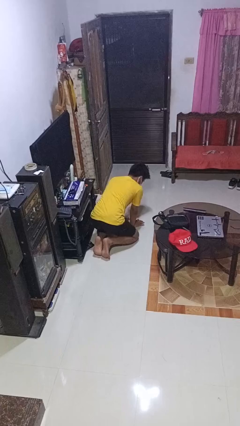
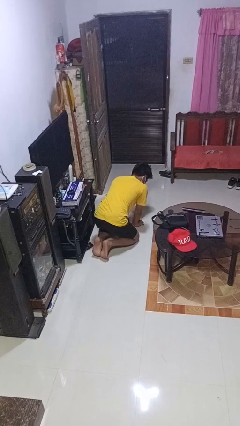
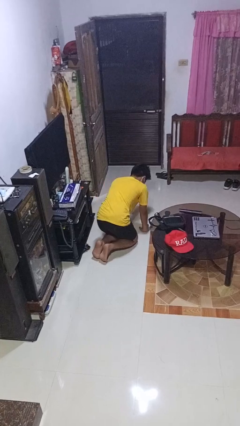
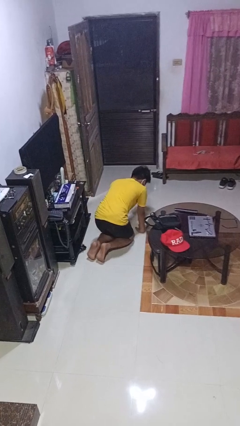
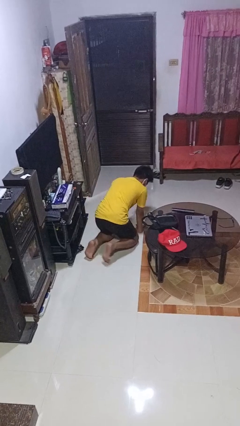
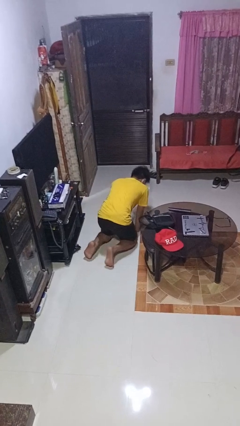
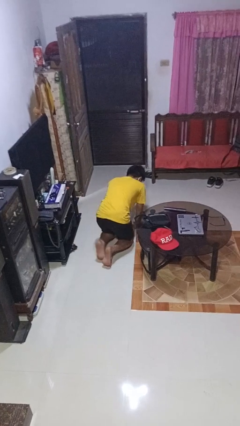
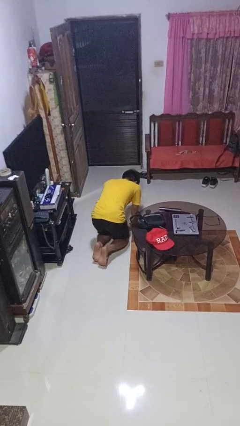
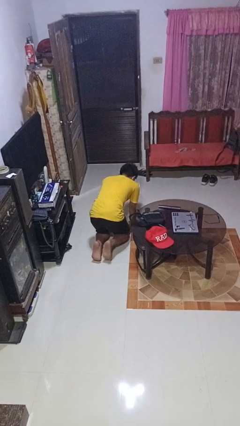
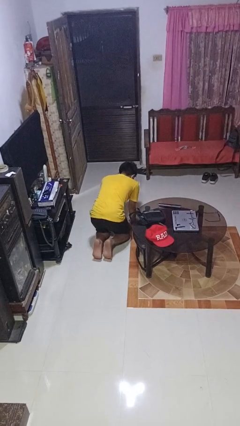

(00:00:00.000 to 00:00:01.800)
person crawls

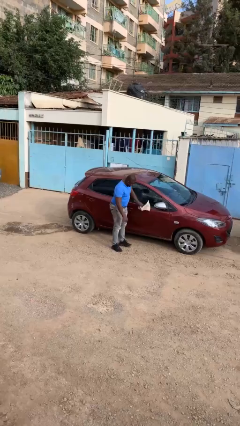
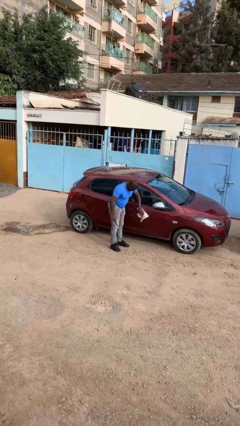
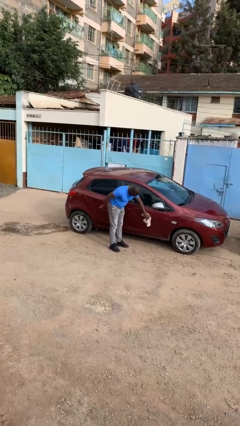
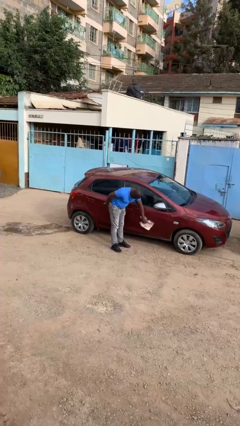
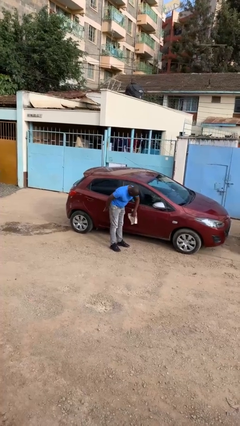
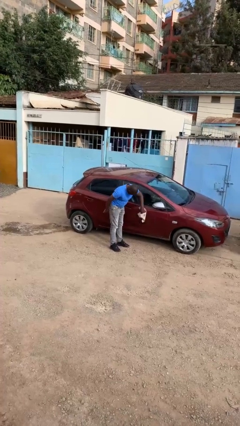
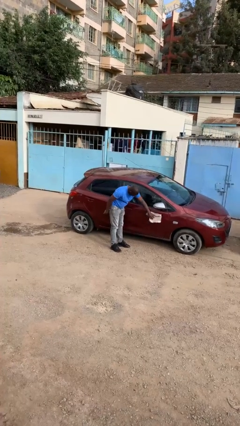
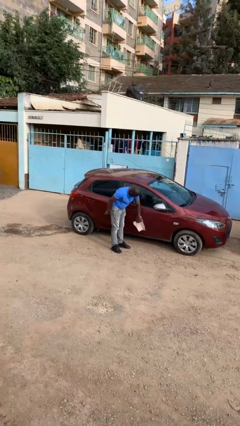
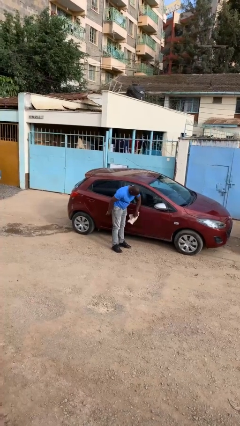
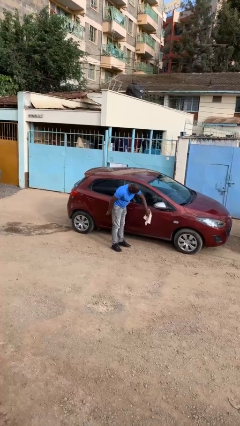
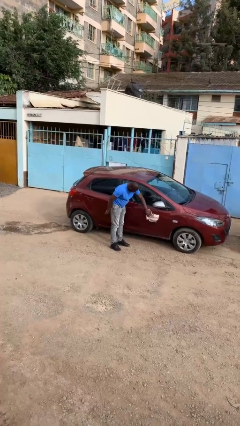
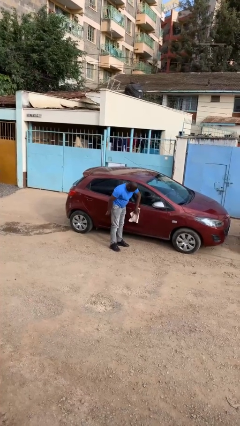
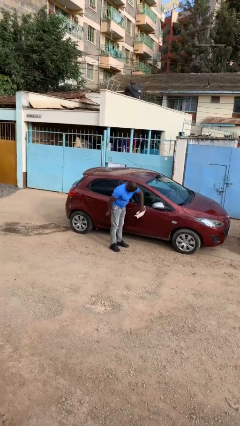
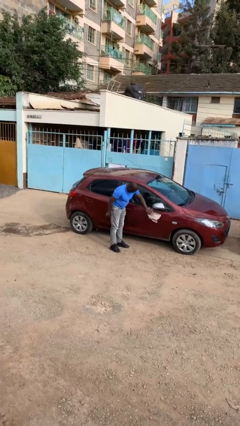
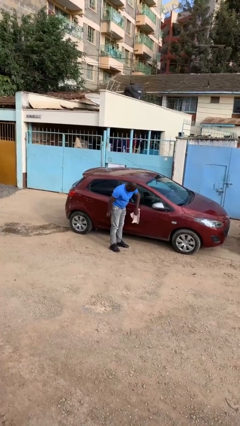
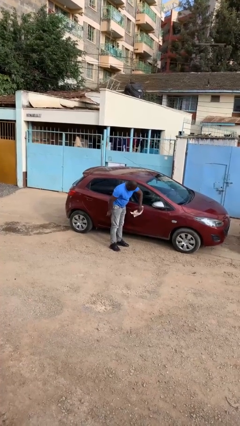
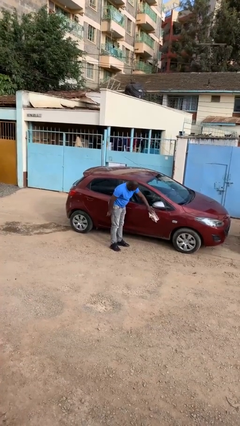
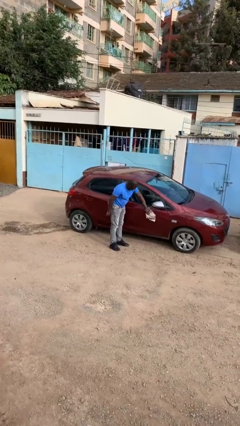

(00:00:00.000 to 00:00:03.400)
person polishes car with rag

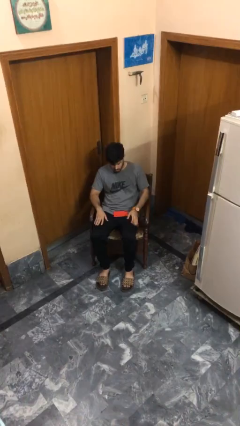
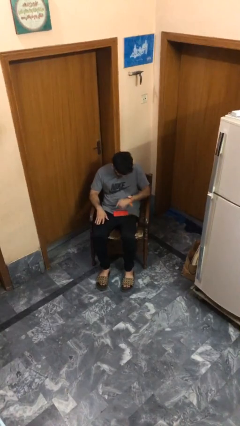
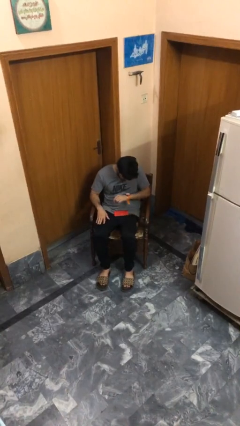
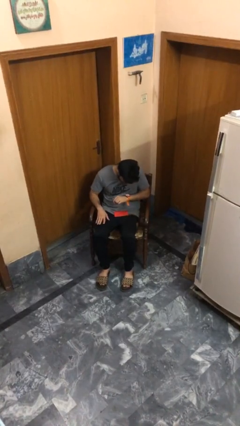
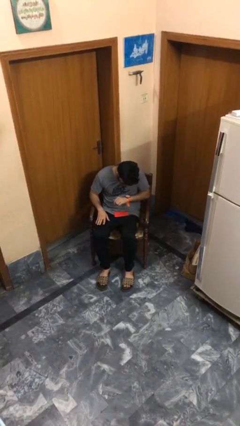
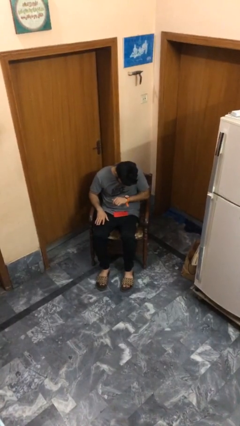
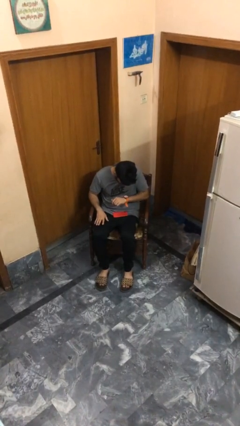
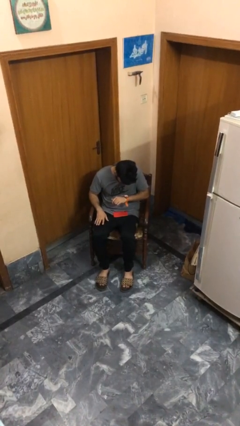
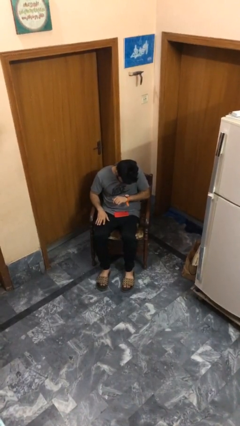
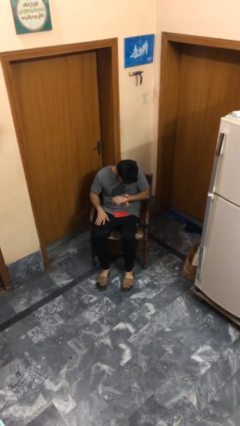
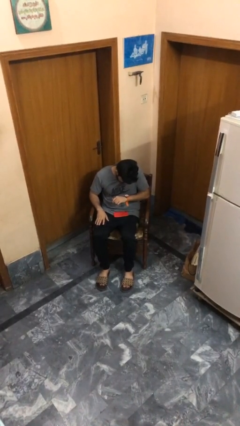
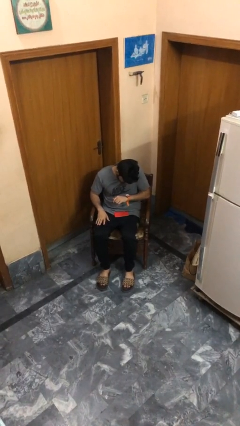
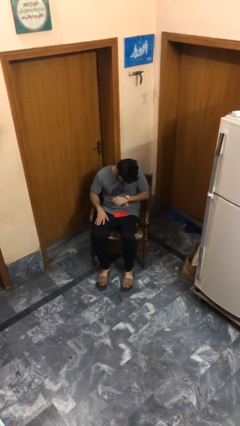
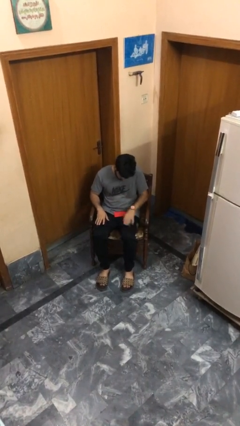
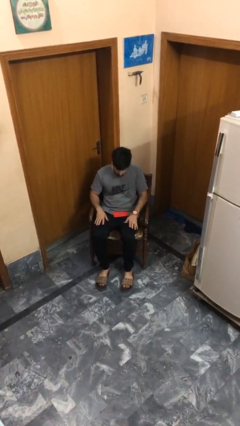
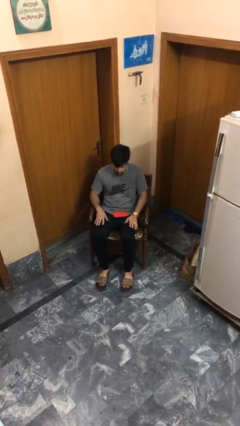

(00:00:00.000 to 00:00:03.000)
person looks at wristwatch

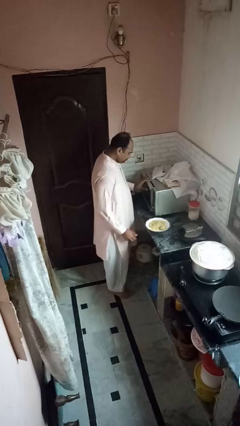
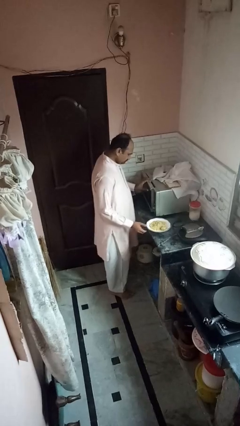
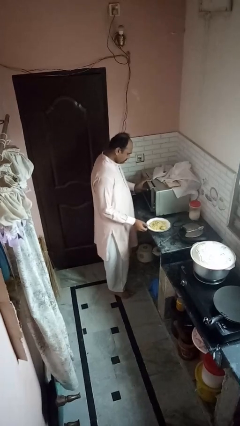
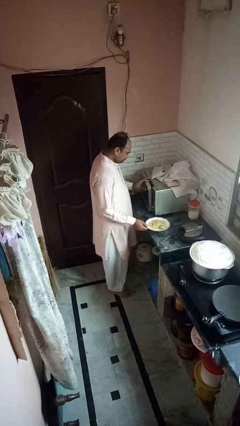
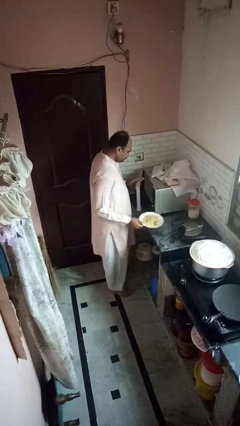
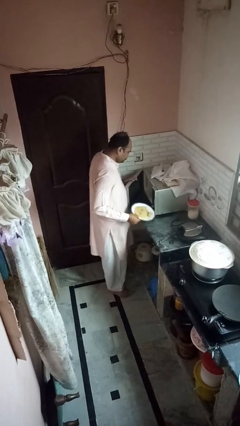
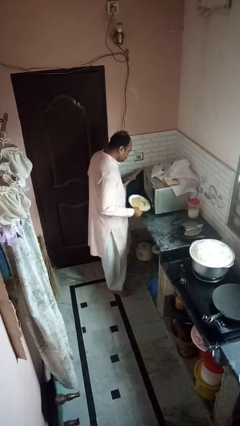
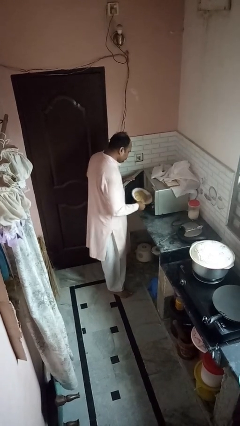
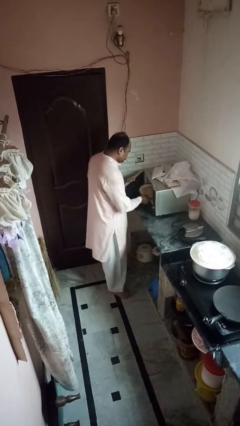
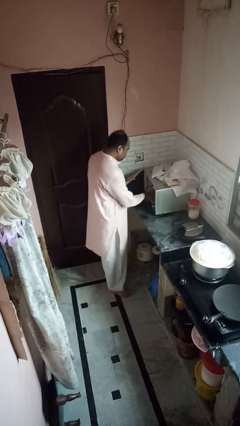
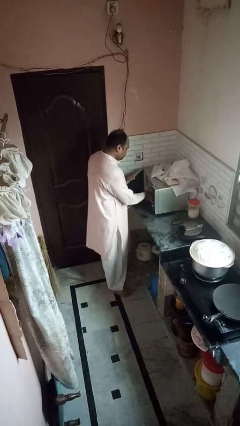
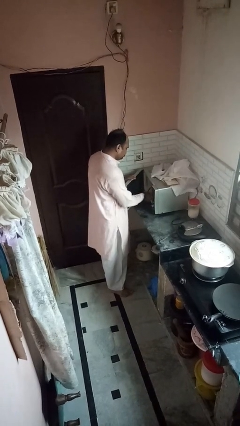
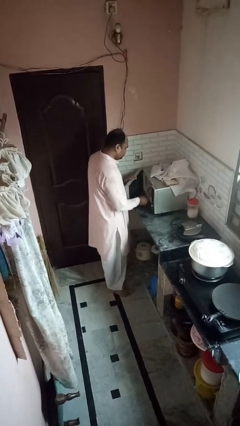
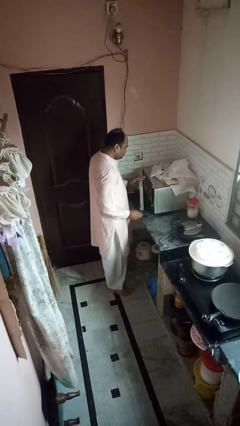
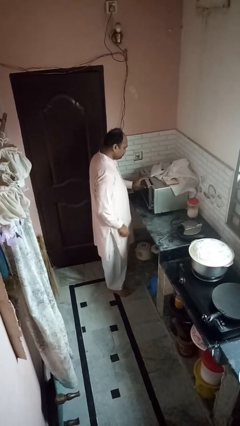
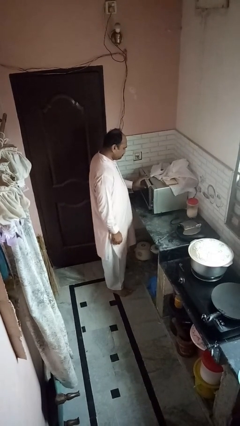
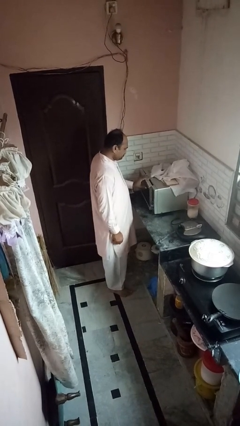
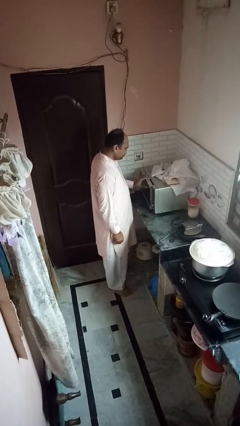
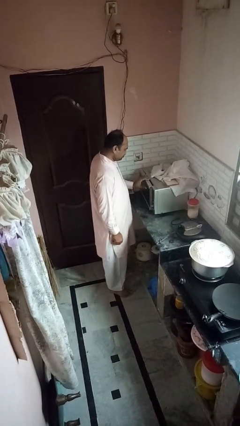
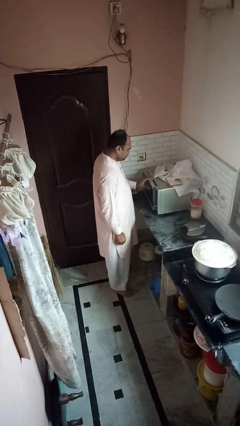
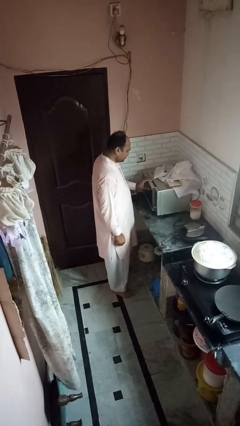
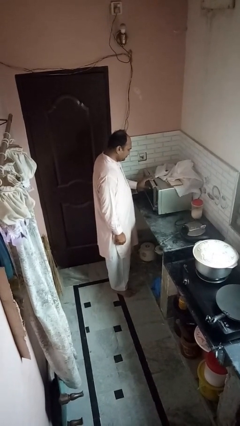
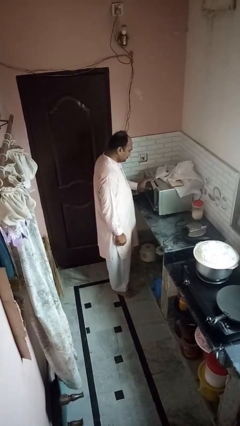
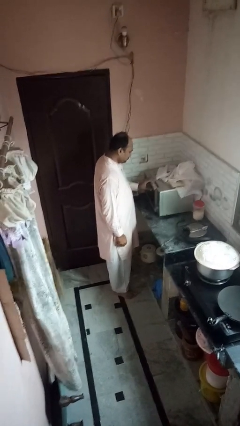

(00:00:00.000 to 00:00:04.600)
person puts object into oven

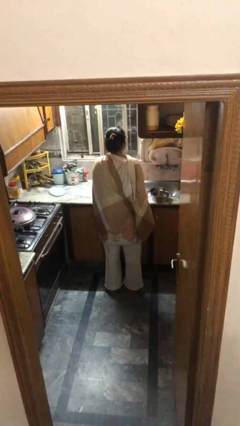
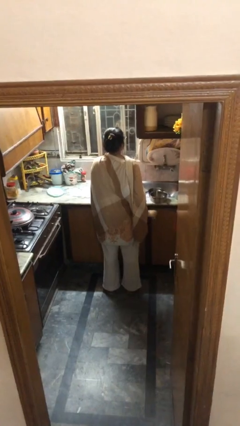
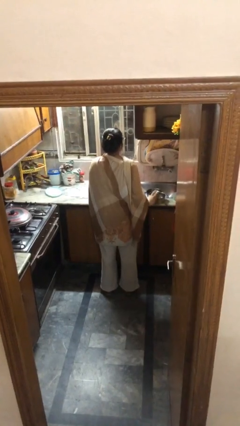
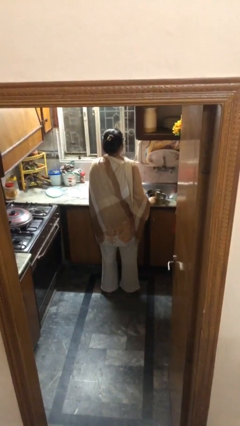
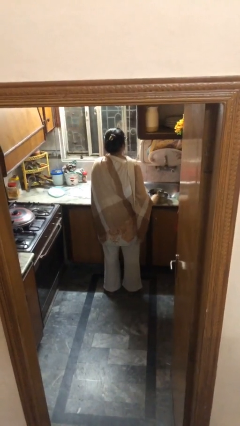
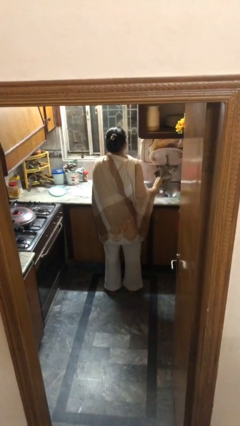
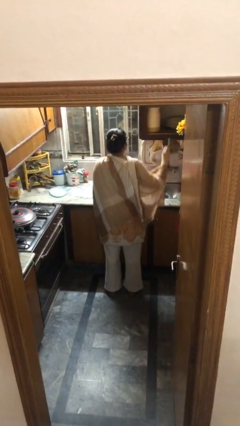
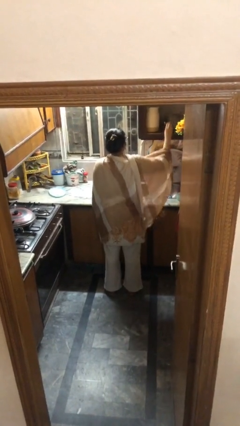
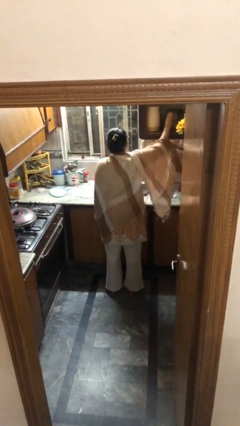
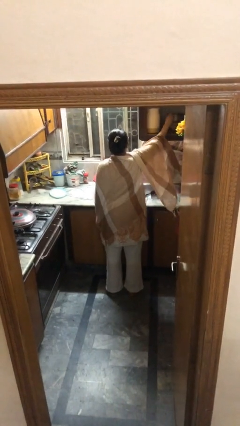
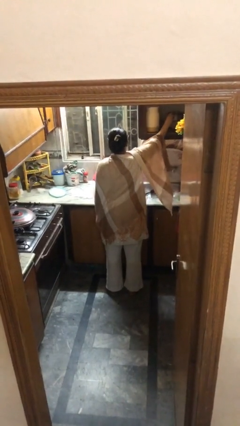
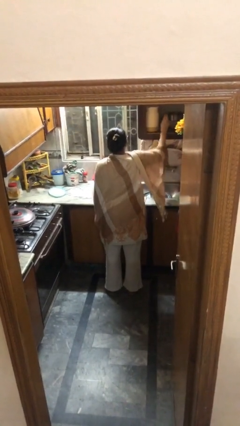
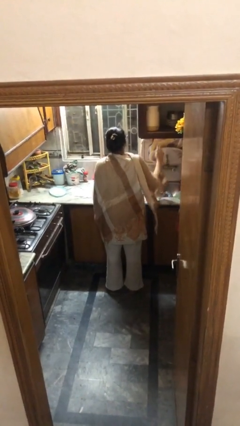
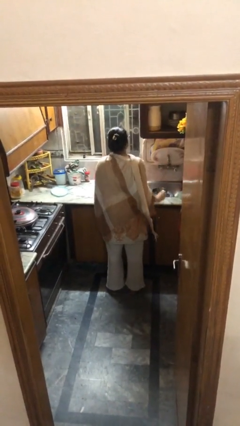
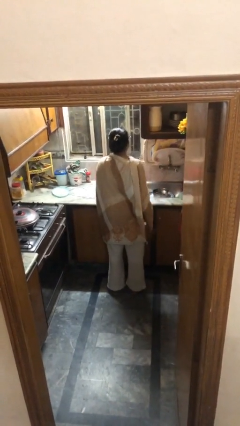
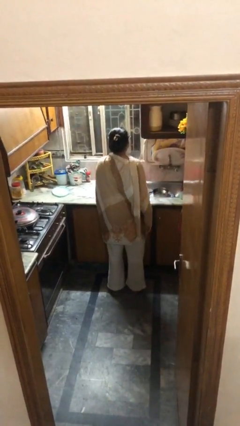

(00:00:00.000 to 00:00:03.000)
person puts object in cabinet

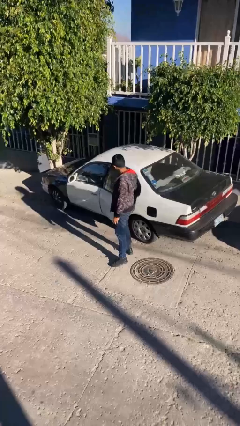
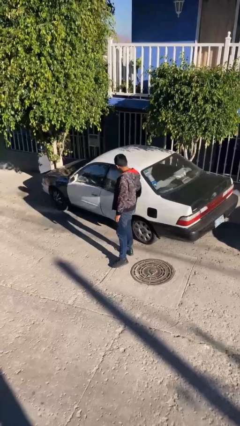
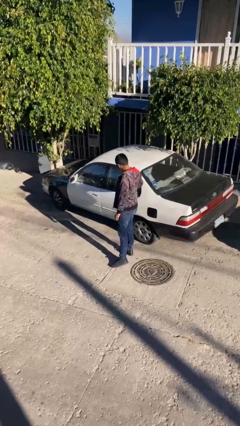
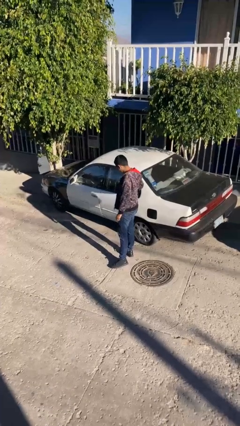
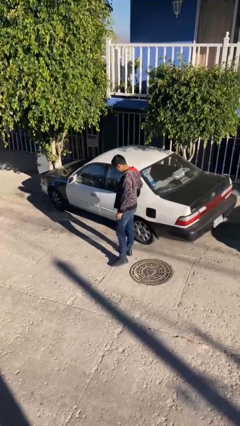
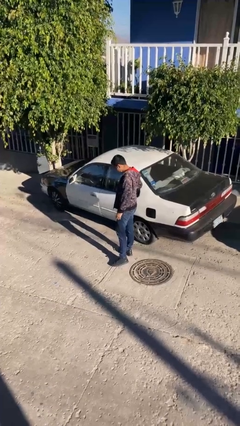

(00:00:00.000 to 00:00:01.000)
person closes car door

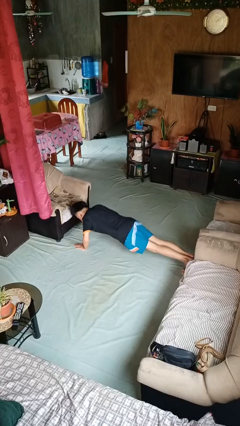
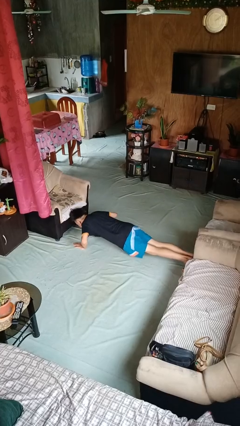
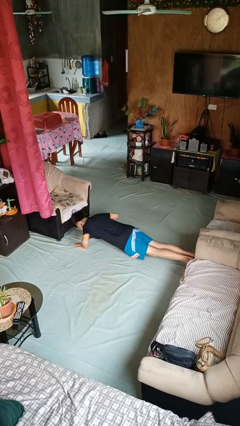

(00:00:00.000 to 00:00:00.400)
person exercises with pushup
